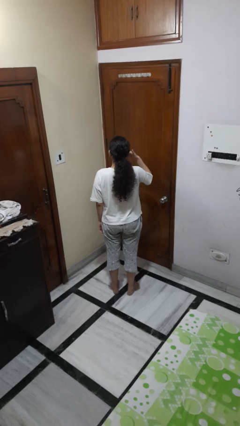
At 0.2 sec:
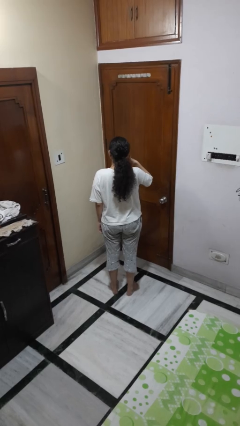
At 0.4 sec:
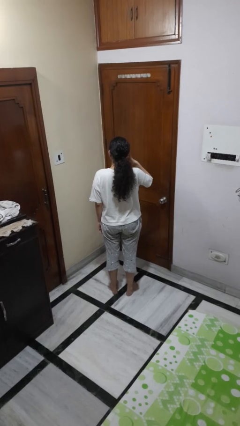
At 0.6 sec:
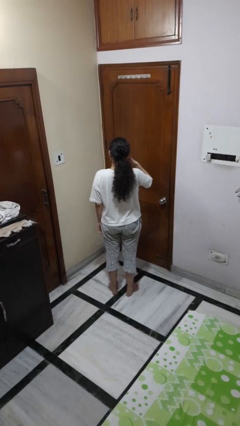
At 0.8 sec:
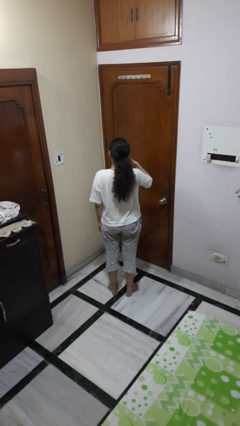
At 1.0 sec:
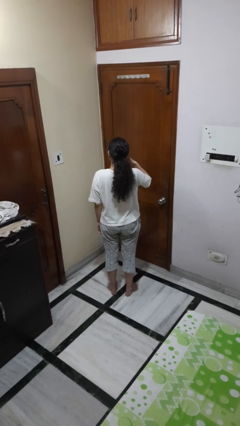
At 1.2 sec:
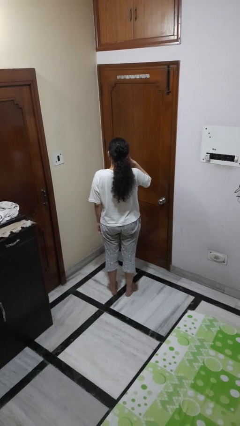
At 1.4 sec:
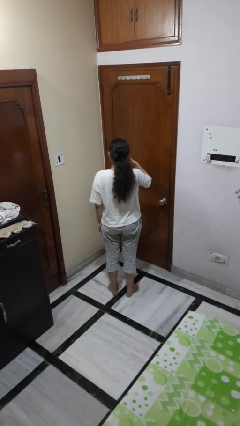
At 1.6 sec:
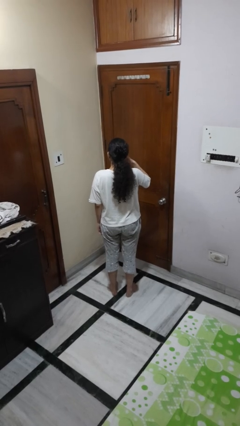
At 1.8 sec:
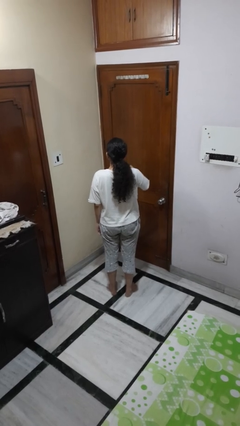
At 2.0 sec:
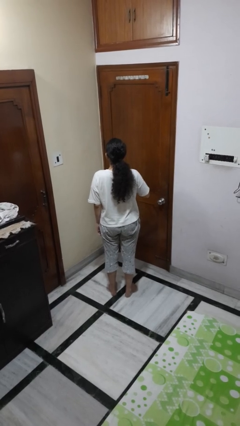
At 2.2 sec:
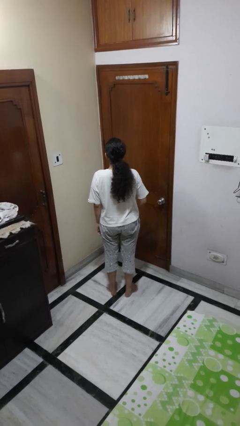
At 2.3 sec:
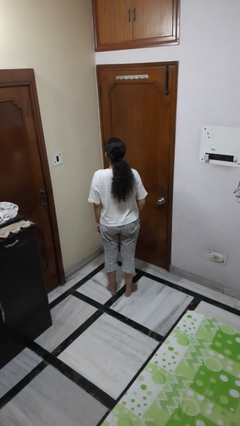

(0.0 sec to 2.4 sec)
person gestures call me

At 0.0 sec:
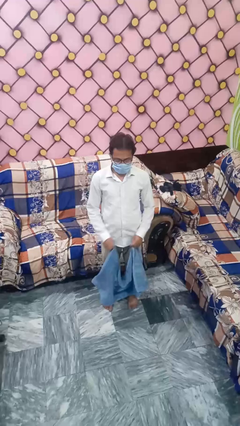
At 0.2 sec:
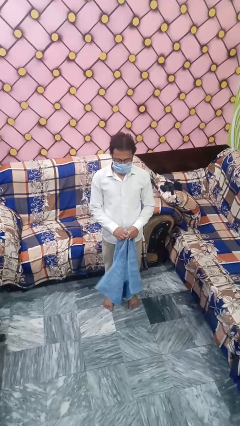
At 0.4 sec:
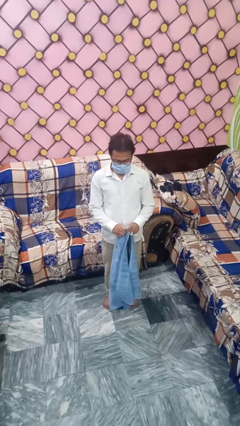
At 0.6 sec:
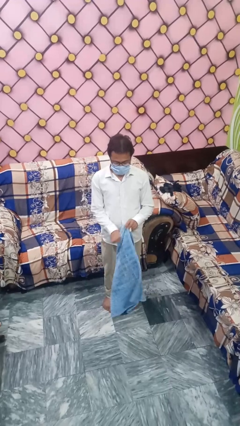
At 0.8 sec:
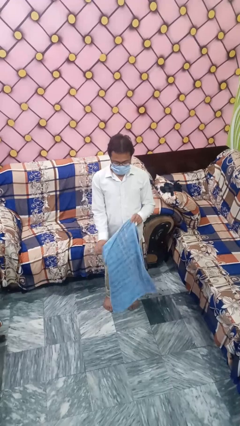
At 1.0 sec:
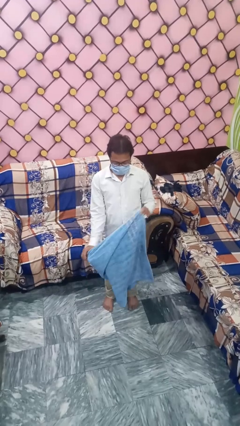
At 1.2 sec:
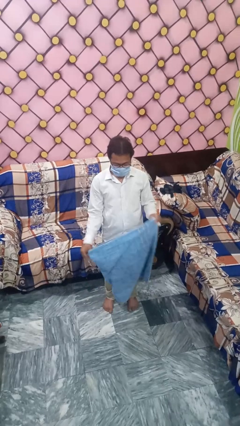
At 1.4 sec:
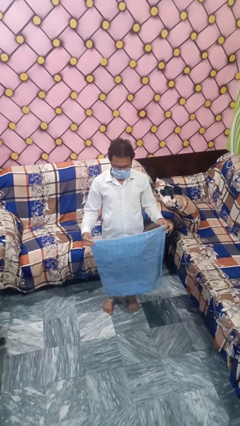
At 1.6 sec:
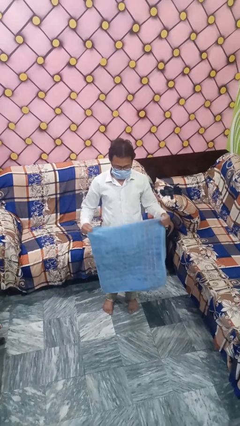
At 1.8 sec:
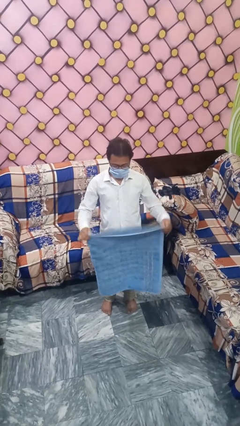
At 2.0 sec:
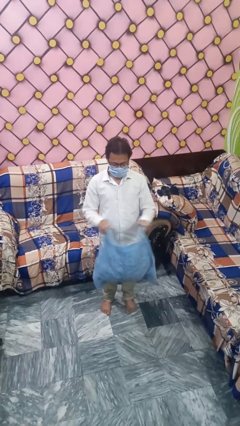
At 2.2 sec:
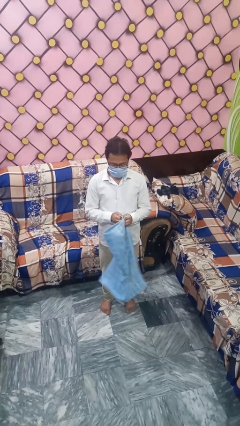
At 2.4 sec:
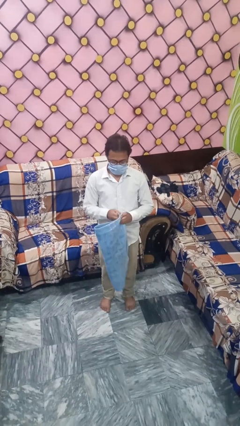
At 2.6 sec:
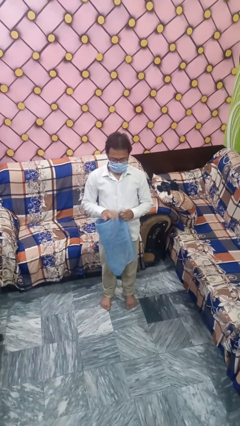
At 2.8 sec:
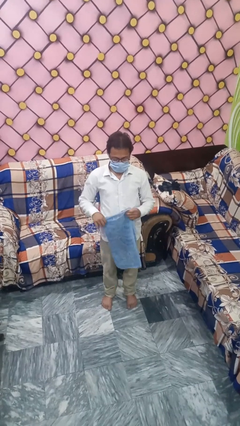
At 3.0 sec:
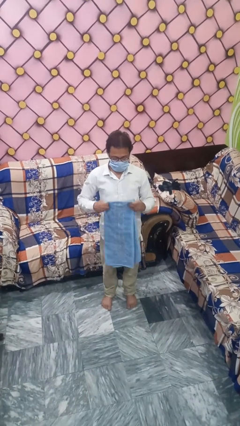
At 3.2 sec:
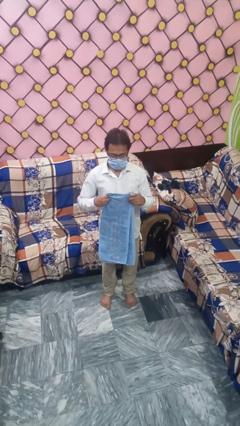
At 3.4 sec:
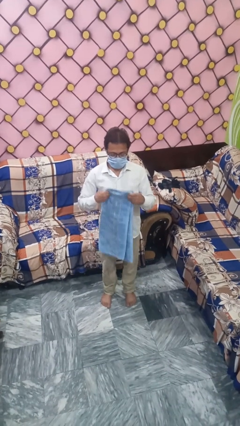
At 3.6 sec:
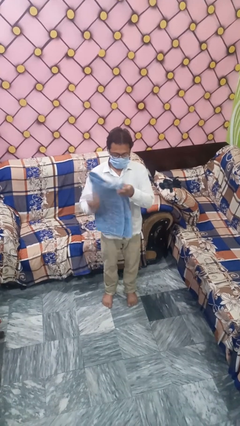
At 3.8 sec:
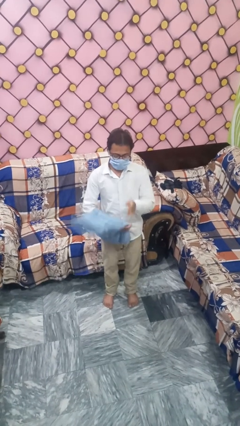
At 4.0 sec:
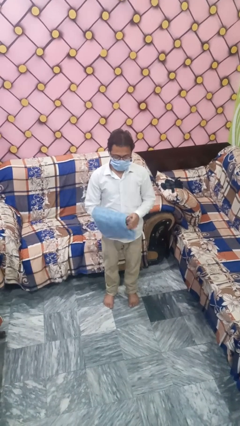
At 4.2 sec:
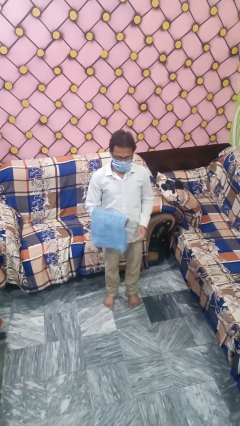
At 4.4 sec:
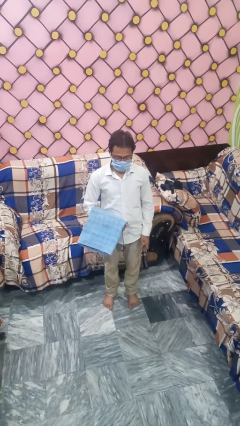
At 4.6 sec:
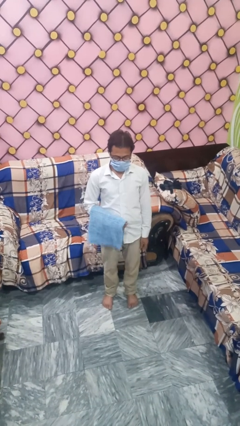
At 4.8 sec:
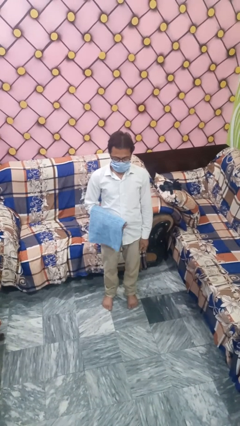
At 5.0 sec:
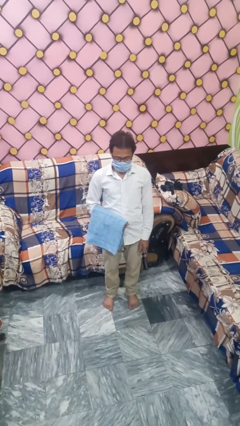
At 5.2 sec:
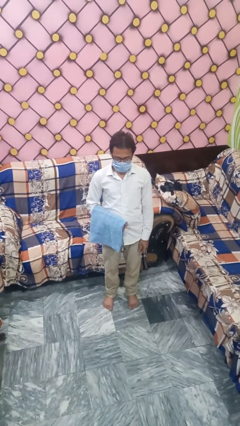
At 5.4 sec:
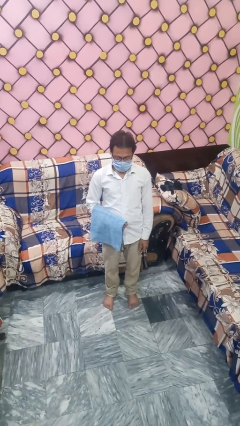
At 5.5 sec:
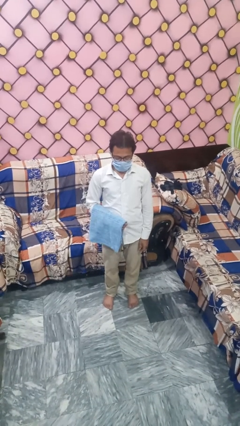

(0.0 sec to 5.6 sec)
person folds towel

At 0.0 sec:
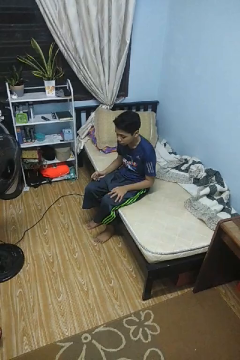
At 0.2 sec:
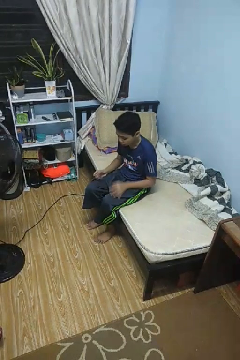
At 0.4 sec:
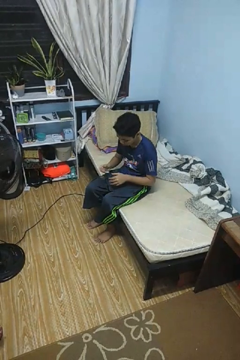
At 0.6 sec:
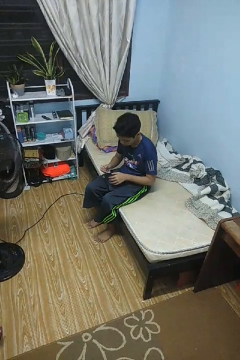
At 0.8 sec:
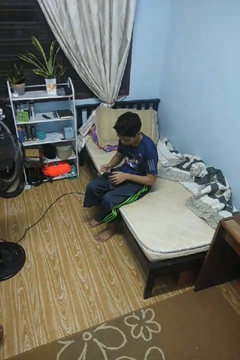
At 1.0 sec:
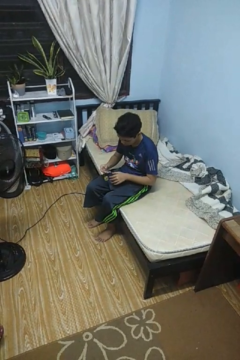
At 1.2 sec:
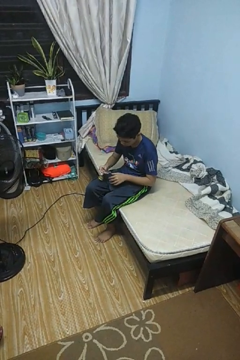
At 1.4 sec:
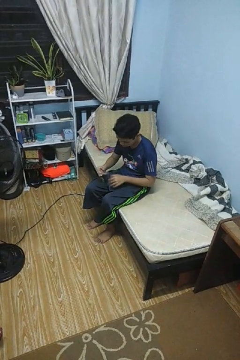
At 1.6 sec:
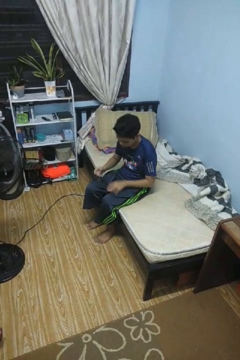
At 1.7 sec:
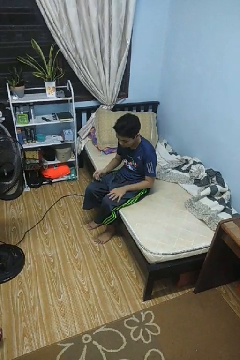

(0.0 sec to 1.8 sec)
person clips fingernails

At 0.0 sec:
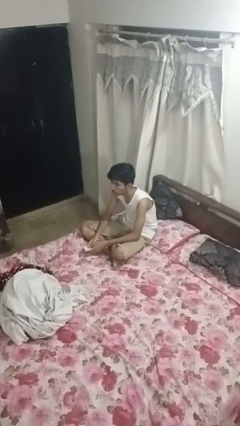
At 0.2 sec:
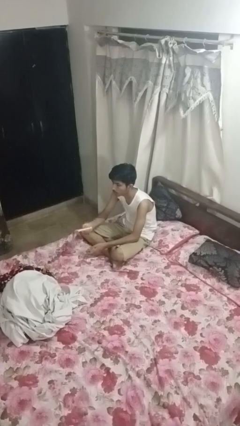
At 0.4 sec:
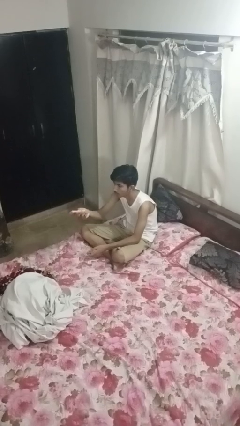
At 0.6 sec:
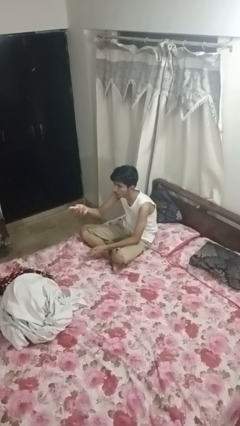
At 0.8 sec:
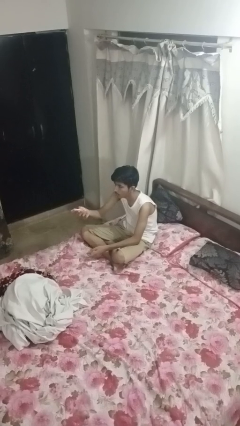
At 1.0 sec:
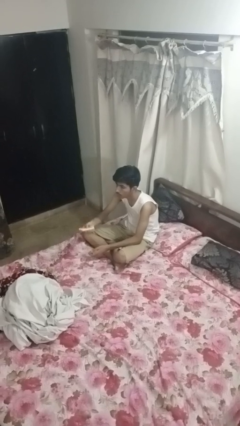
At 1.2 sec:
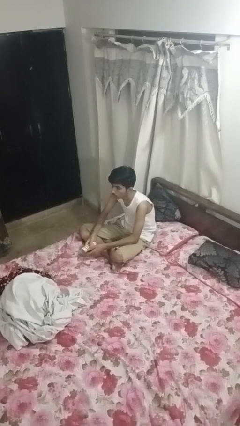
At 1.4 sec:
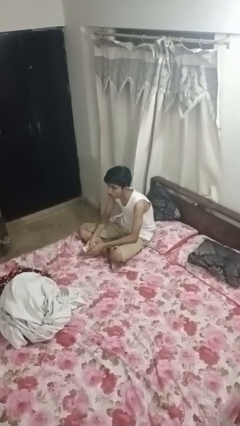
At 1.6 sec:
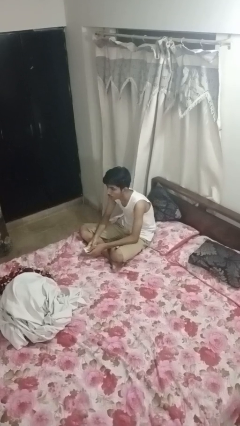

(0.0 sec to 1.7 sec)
person uses television remote

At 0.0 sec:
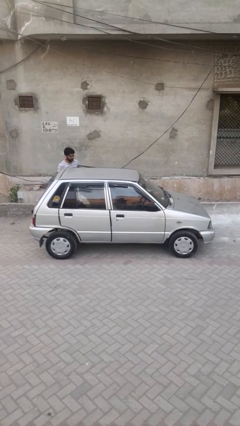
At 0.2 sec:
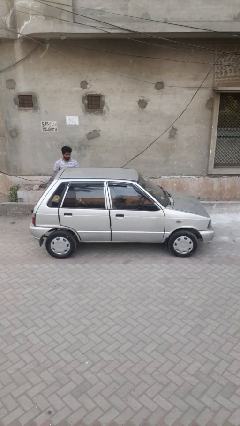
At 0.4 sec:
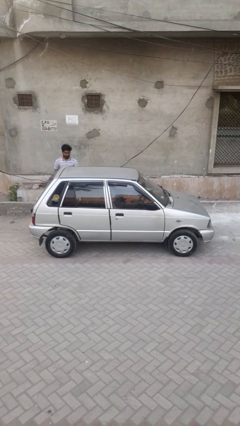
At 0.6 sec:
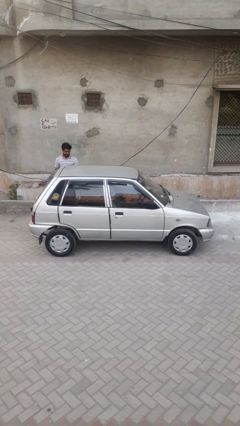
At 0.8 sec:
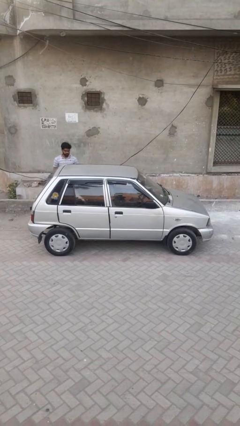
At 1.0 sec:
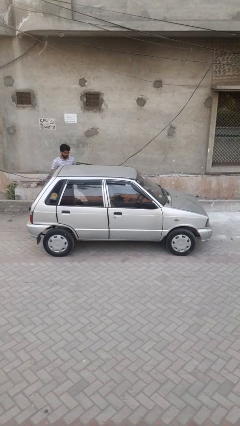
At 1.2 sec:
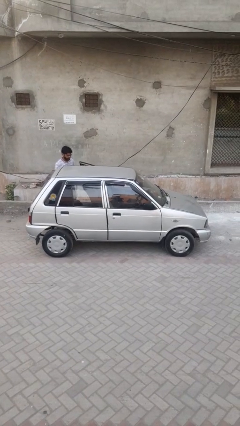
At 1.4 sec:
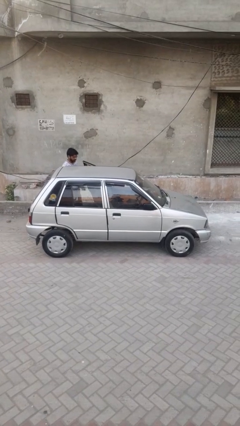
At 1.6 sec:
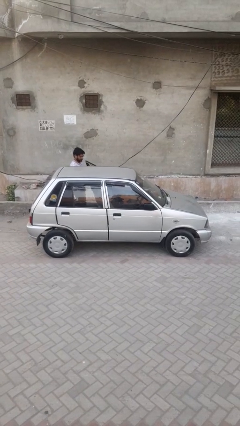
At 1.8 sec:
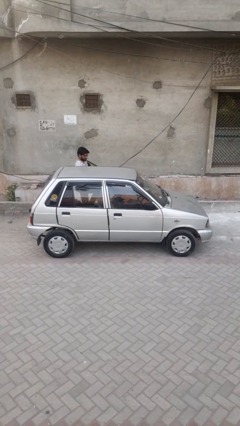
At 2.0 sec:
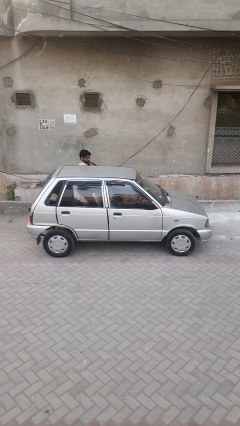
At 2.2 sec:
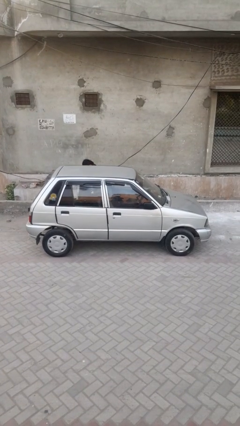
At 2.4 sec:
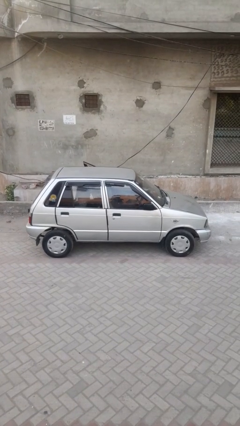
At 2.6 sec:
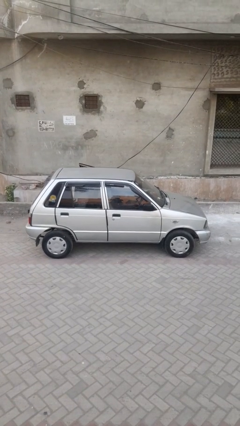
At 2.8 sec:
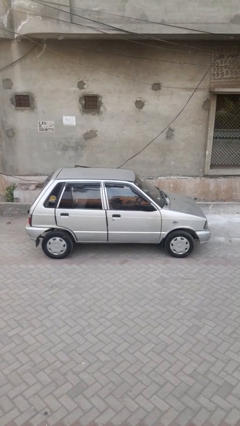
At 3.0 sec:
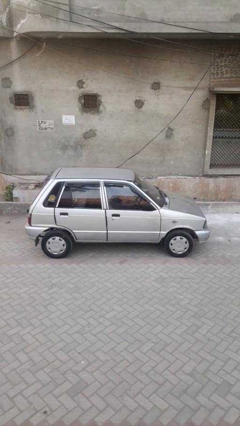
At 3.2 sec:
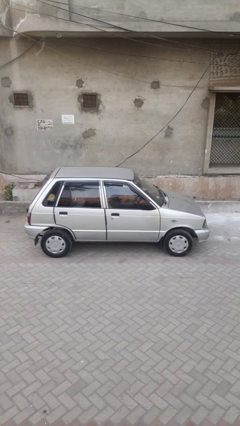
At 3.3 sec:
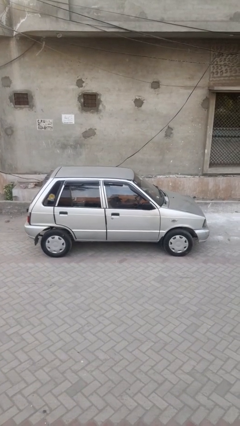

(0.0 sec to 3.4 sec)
car picks up person

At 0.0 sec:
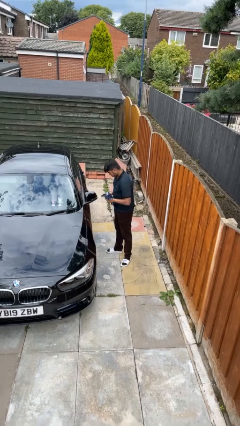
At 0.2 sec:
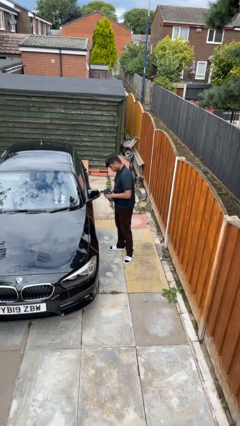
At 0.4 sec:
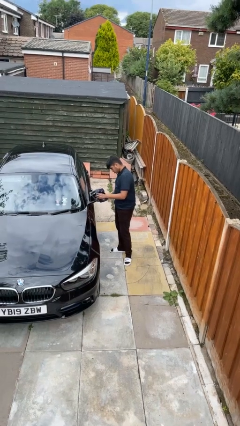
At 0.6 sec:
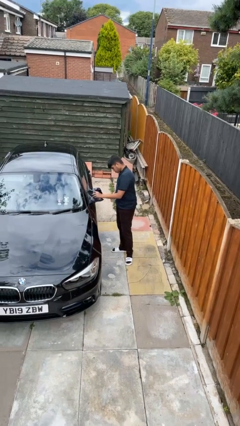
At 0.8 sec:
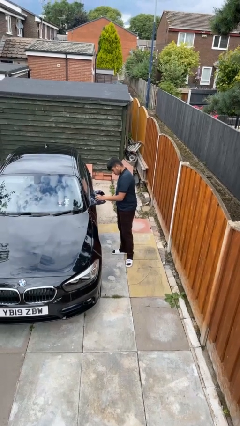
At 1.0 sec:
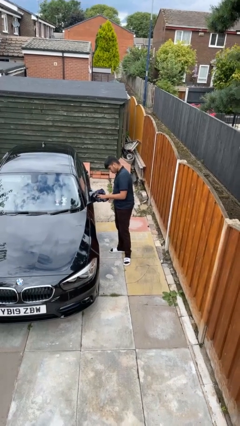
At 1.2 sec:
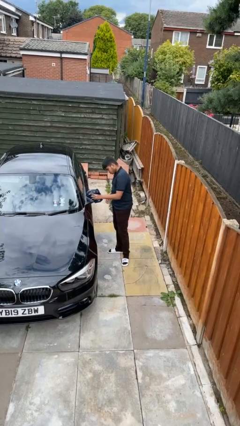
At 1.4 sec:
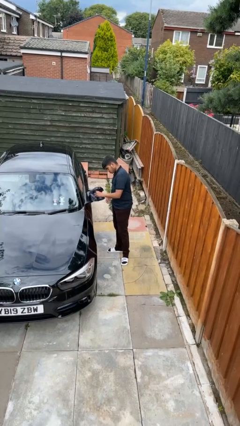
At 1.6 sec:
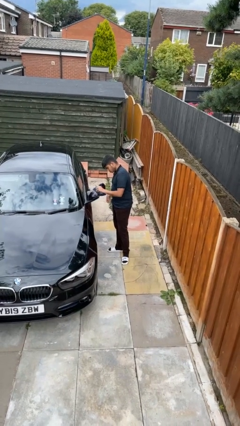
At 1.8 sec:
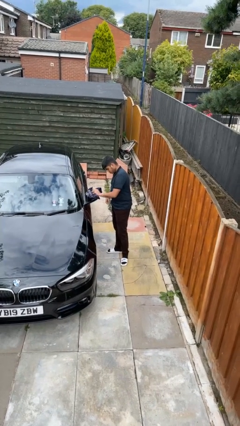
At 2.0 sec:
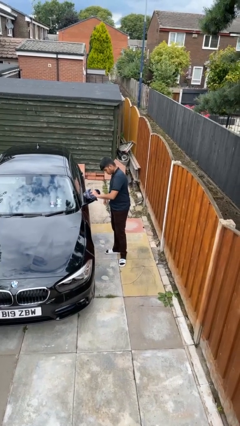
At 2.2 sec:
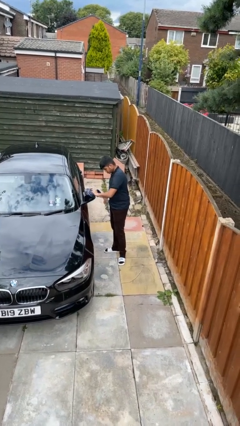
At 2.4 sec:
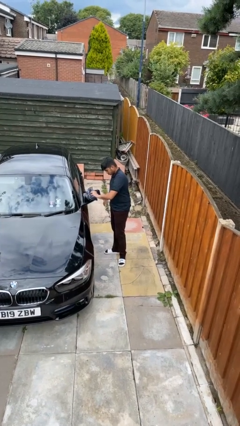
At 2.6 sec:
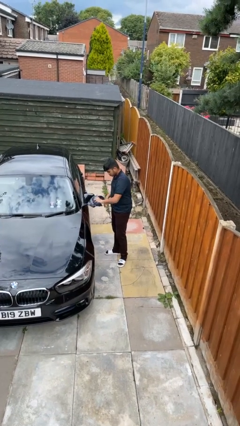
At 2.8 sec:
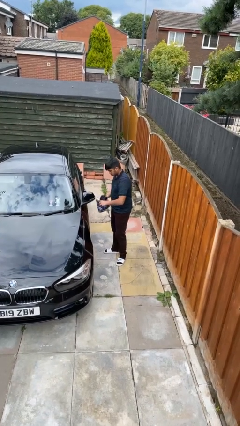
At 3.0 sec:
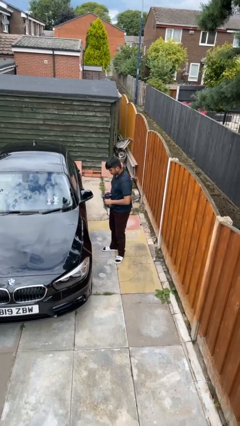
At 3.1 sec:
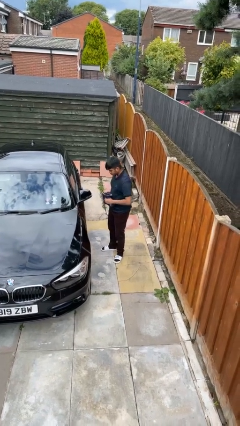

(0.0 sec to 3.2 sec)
person polishes car with rag
